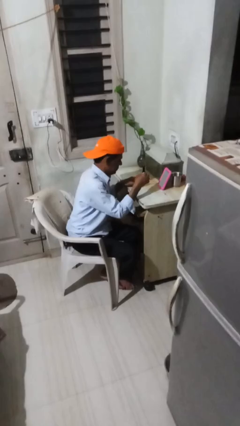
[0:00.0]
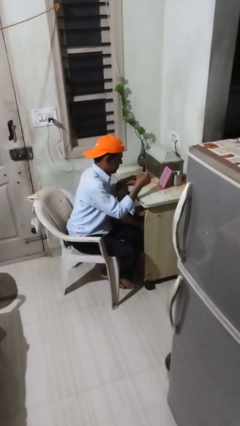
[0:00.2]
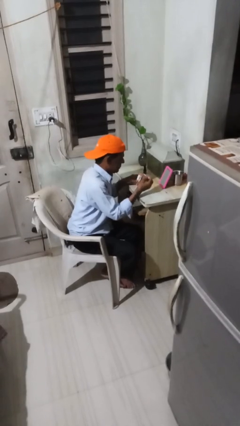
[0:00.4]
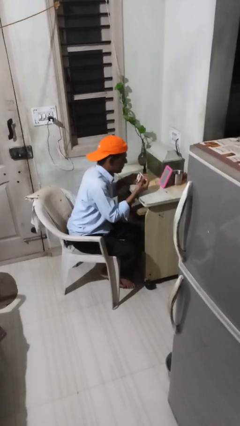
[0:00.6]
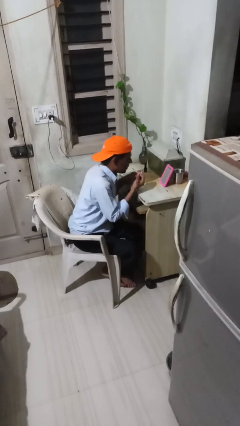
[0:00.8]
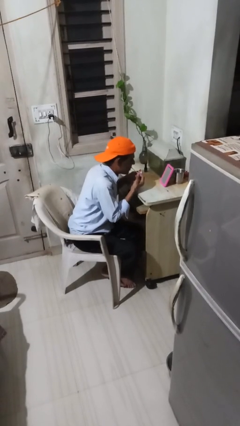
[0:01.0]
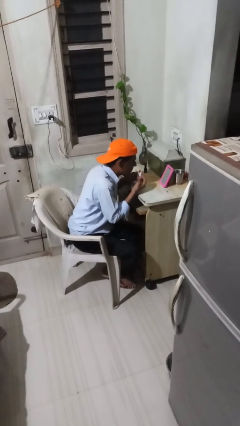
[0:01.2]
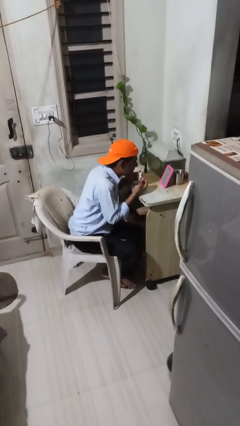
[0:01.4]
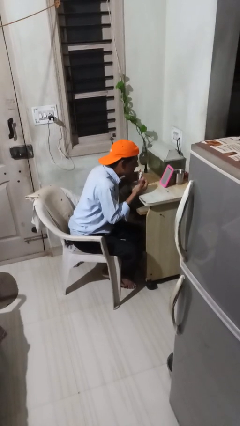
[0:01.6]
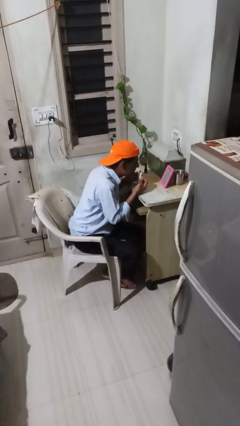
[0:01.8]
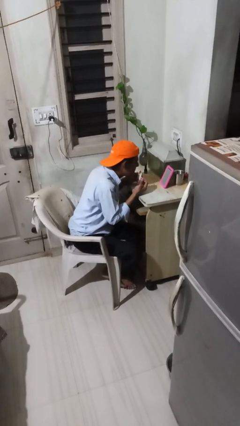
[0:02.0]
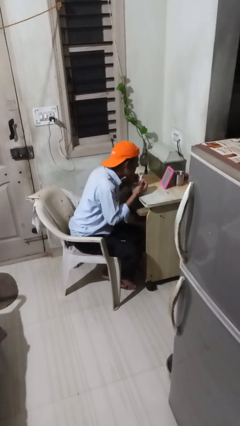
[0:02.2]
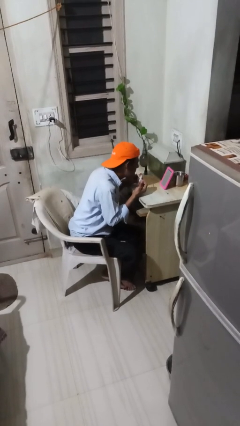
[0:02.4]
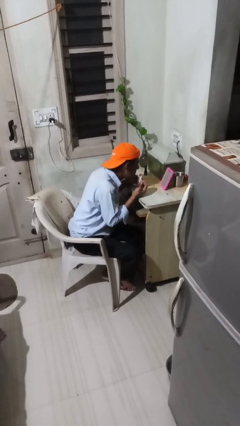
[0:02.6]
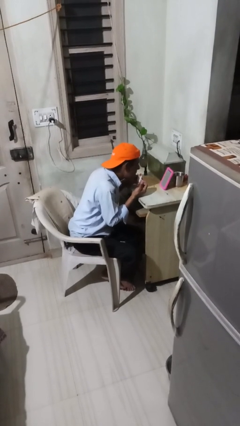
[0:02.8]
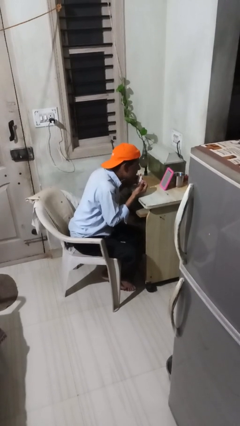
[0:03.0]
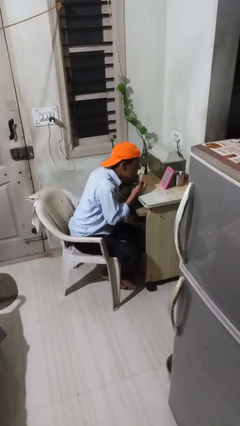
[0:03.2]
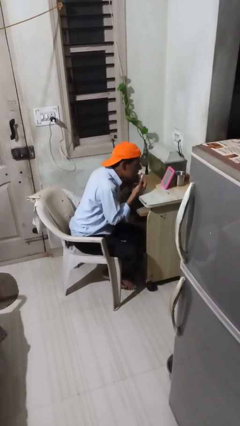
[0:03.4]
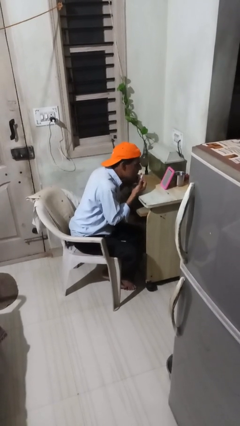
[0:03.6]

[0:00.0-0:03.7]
person applies lip makeup

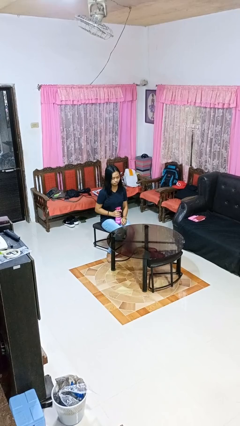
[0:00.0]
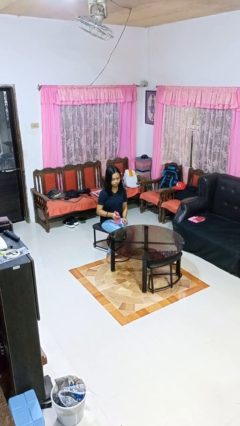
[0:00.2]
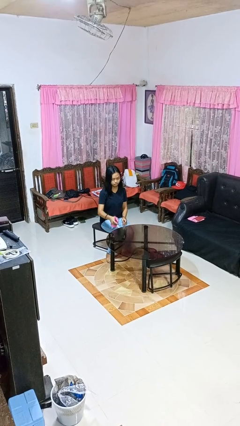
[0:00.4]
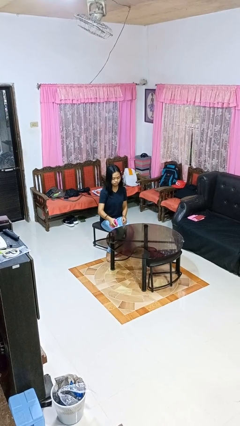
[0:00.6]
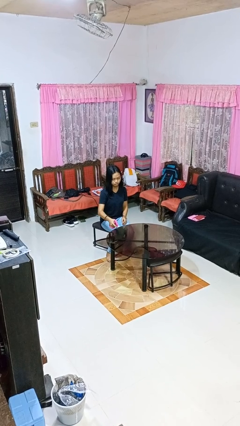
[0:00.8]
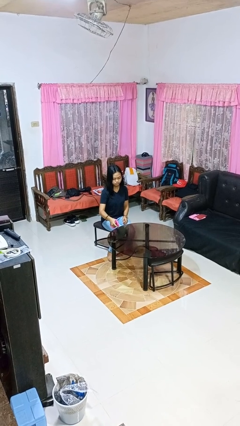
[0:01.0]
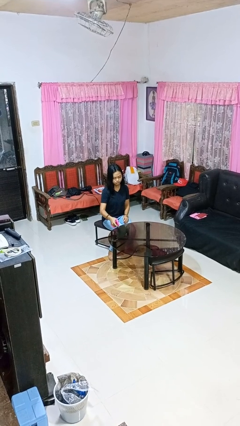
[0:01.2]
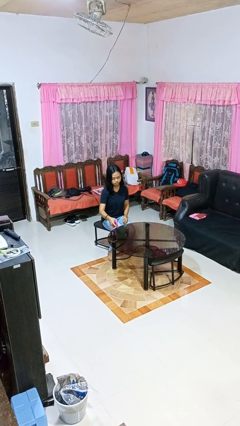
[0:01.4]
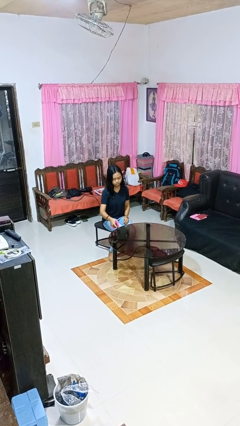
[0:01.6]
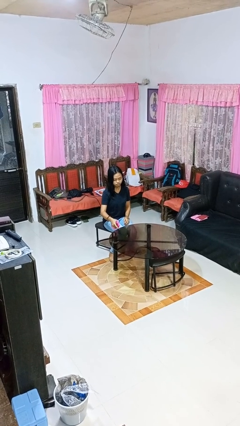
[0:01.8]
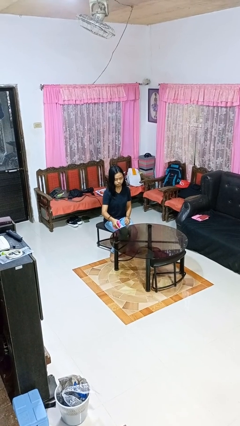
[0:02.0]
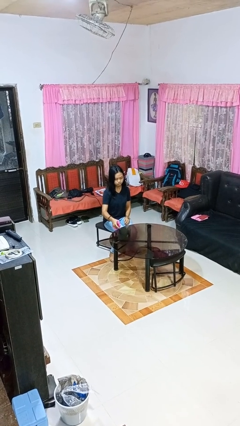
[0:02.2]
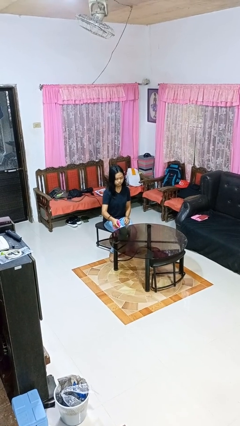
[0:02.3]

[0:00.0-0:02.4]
person sprays from bottle

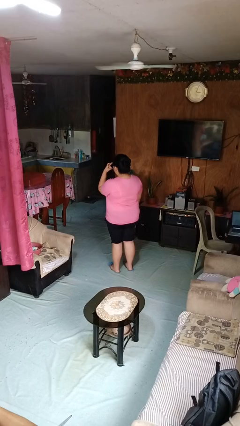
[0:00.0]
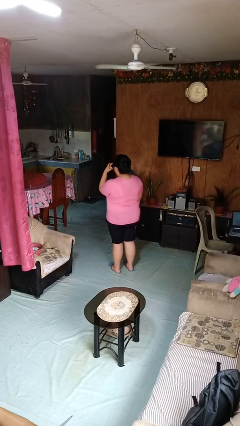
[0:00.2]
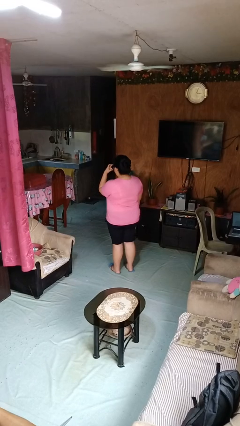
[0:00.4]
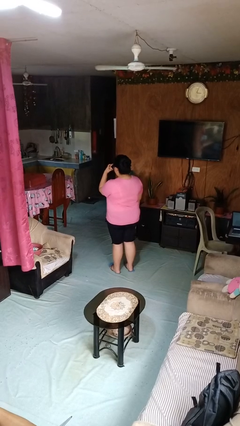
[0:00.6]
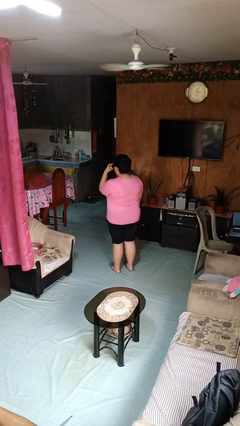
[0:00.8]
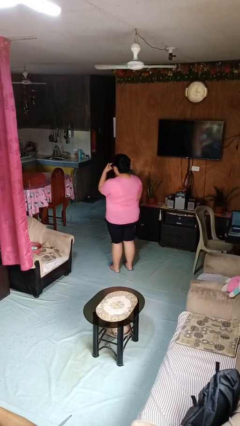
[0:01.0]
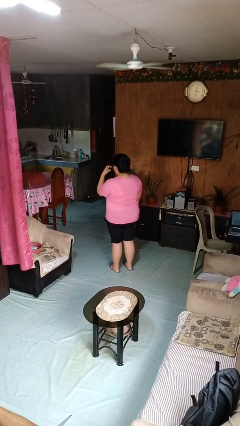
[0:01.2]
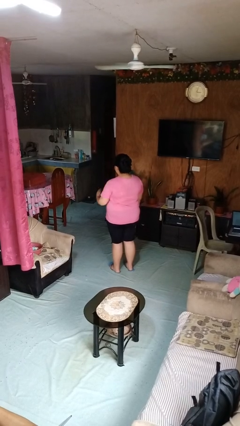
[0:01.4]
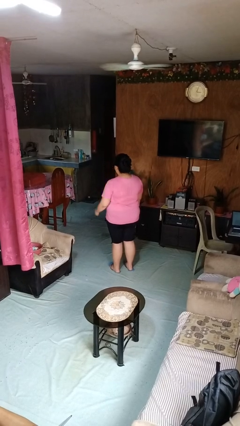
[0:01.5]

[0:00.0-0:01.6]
person gestures watch closely

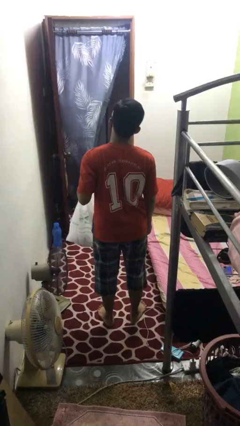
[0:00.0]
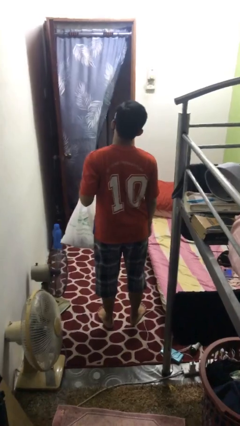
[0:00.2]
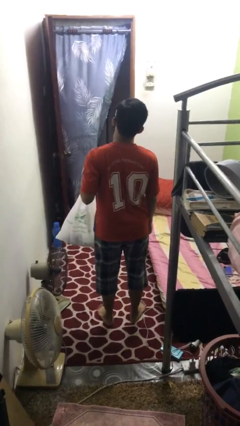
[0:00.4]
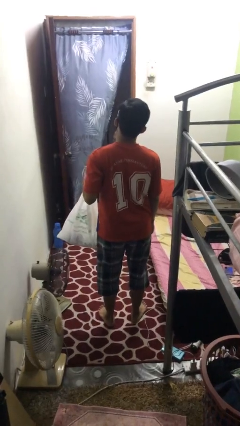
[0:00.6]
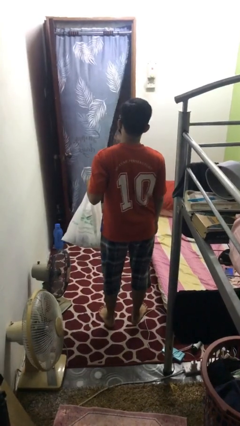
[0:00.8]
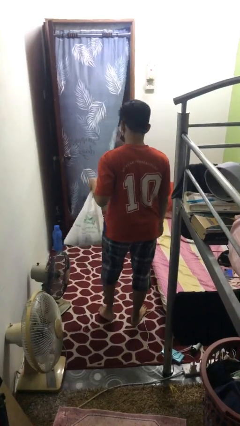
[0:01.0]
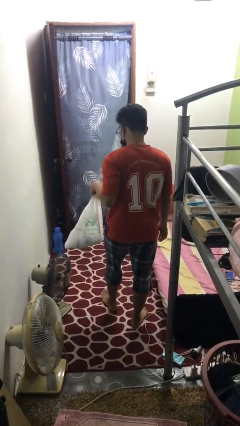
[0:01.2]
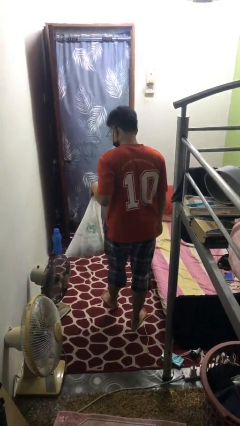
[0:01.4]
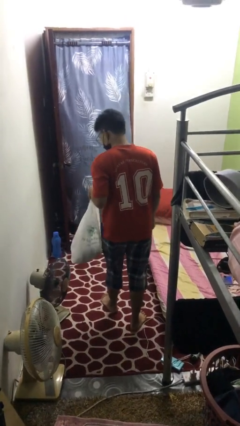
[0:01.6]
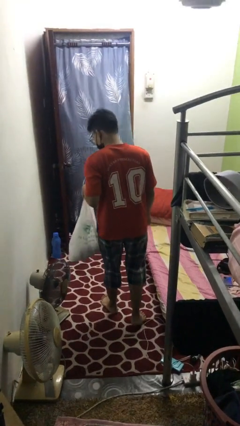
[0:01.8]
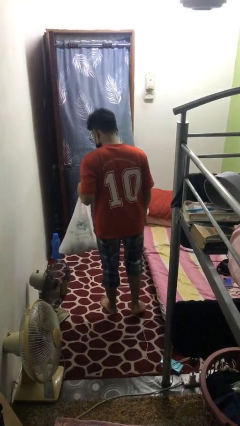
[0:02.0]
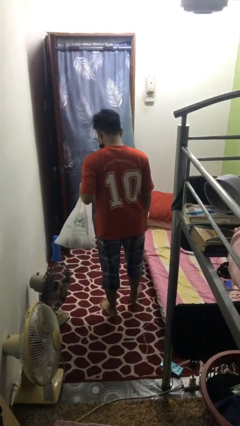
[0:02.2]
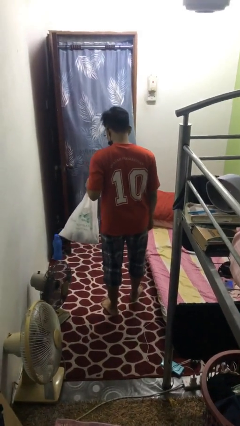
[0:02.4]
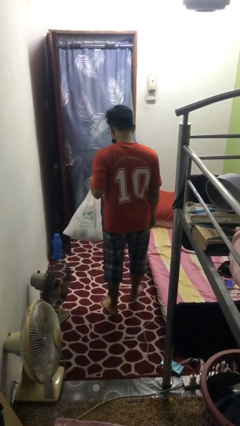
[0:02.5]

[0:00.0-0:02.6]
person carries groceries

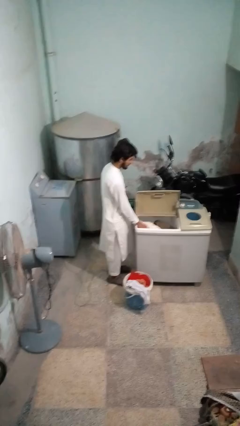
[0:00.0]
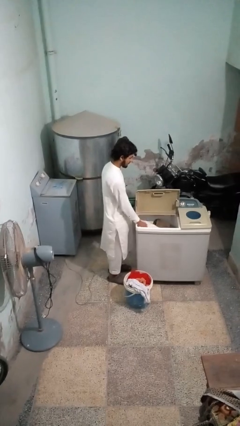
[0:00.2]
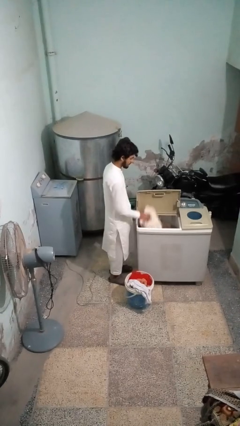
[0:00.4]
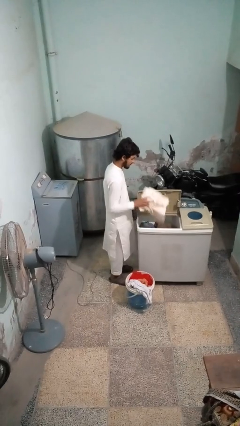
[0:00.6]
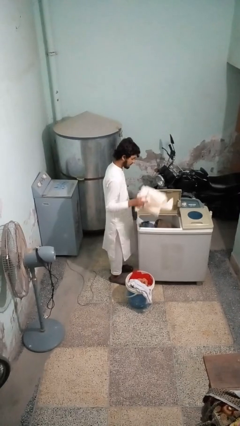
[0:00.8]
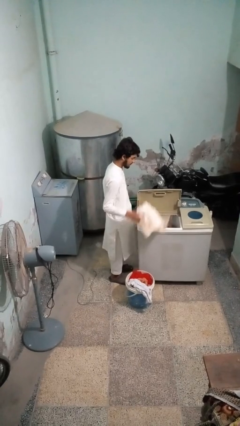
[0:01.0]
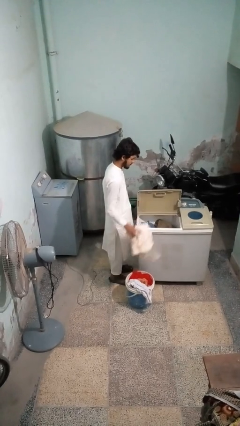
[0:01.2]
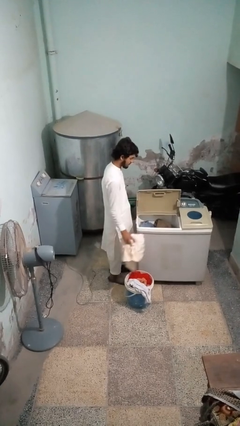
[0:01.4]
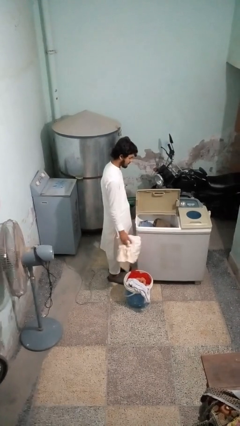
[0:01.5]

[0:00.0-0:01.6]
person unloads clotheswasher

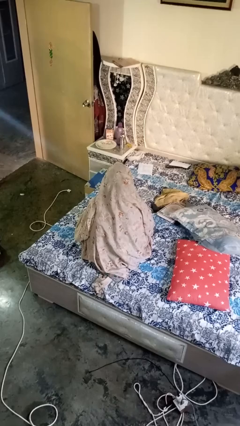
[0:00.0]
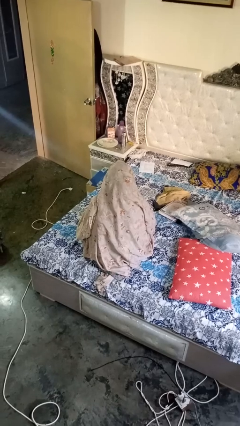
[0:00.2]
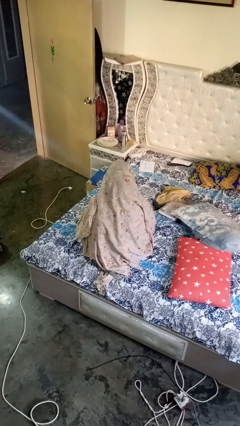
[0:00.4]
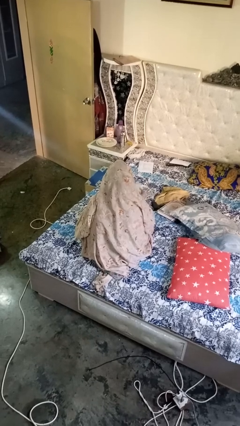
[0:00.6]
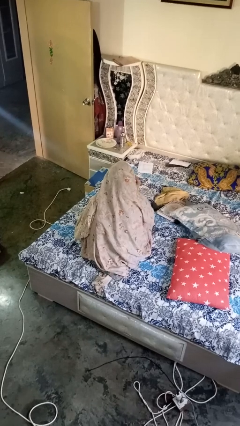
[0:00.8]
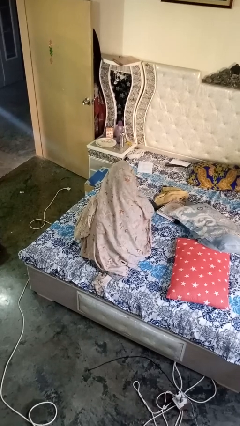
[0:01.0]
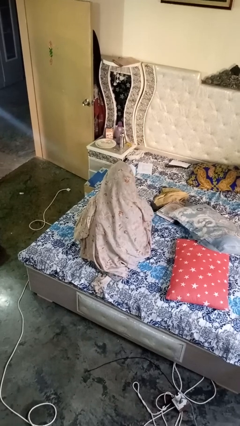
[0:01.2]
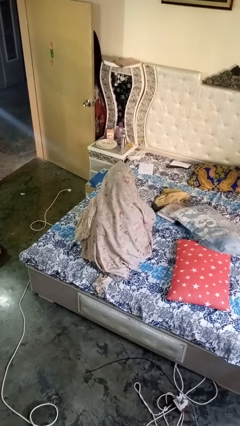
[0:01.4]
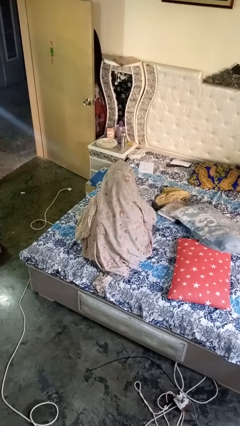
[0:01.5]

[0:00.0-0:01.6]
person wipes mouth with napkin

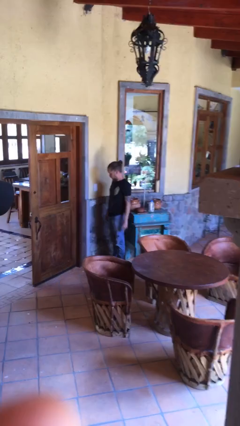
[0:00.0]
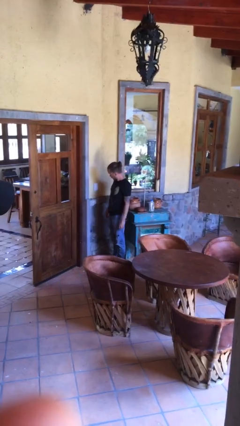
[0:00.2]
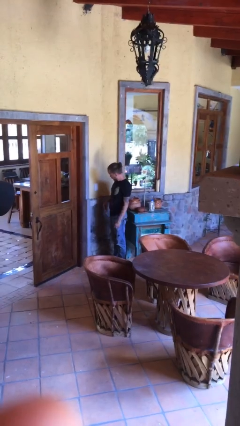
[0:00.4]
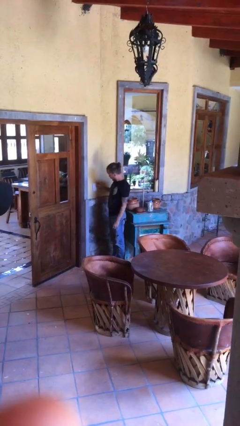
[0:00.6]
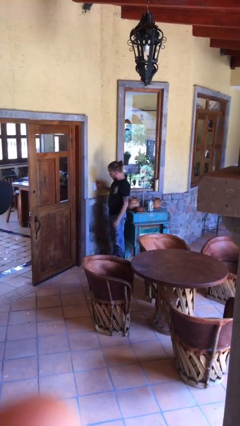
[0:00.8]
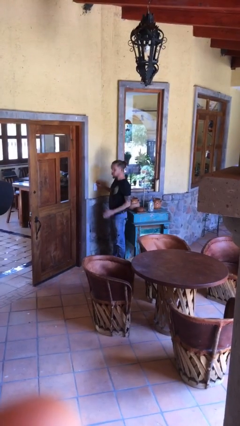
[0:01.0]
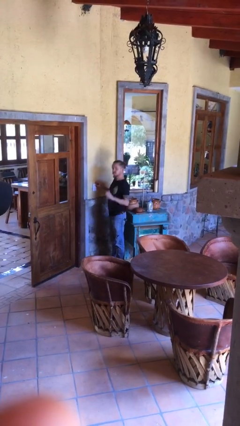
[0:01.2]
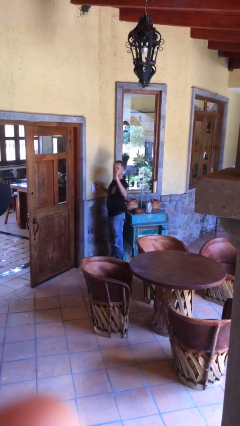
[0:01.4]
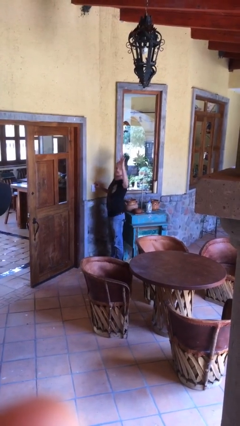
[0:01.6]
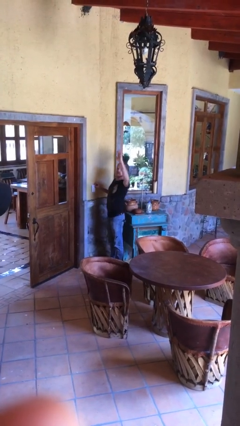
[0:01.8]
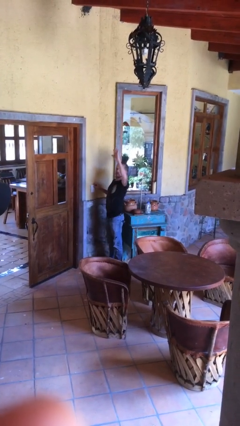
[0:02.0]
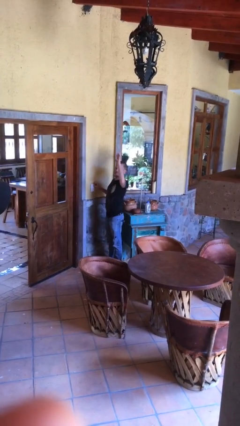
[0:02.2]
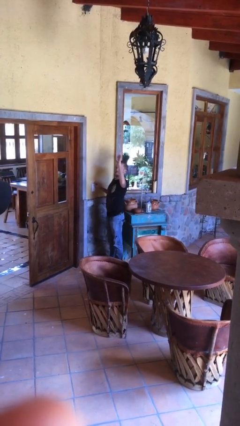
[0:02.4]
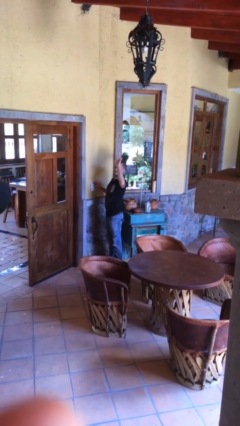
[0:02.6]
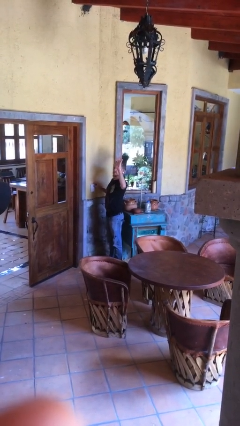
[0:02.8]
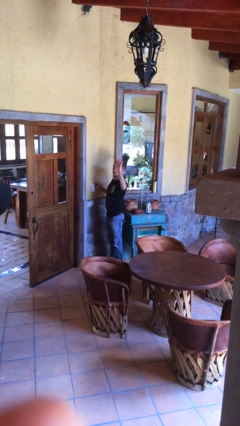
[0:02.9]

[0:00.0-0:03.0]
person adjusts thermostat

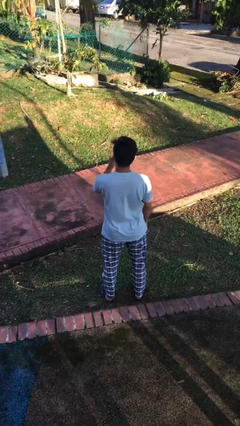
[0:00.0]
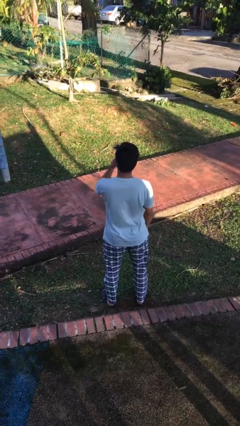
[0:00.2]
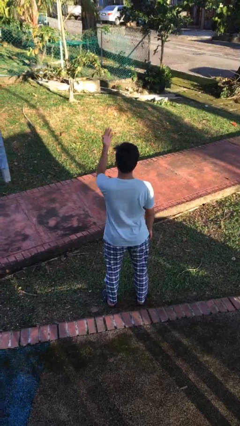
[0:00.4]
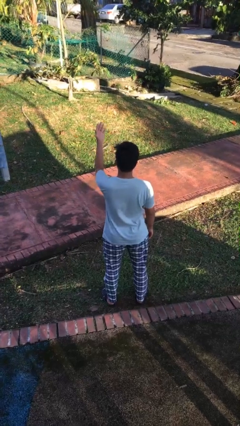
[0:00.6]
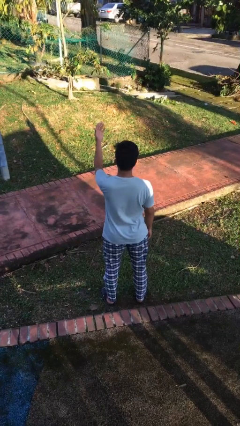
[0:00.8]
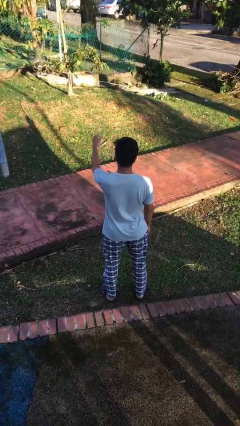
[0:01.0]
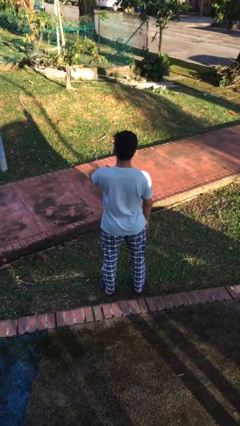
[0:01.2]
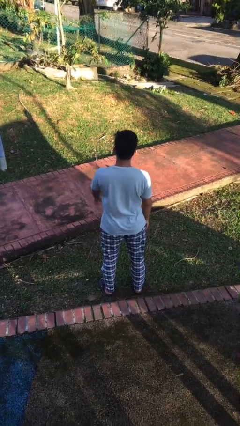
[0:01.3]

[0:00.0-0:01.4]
person gestures blow kiss
